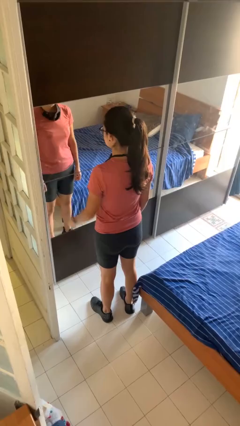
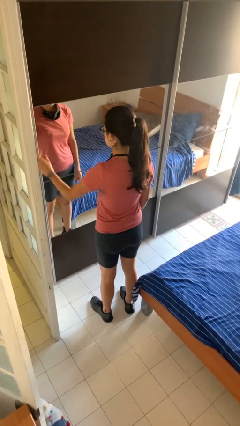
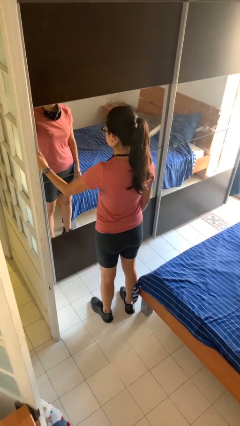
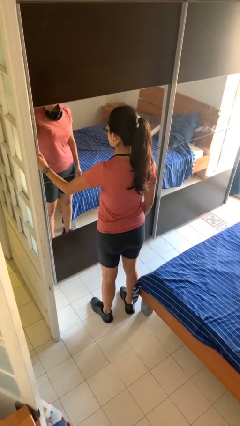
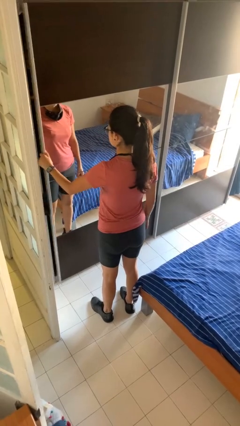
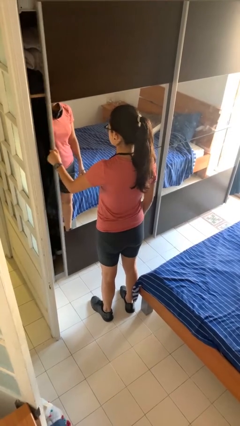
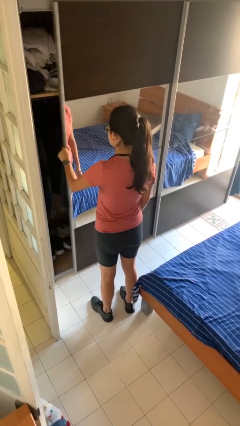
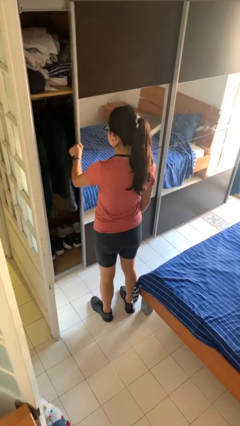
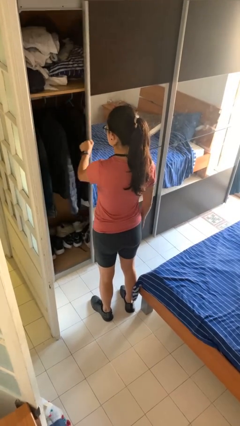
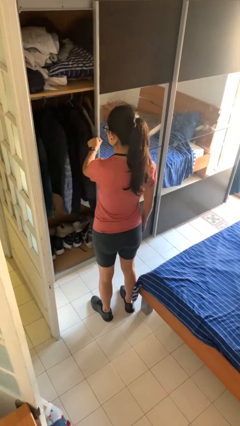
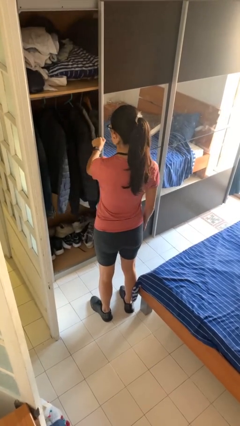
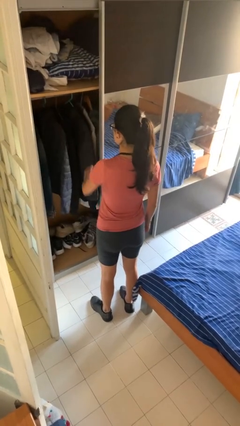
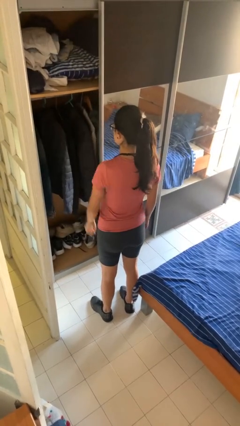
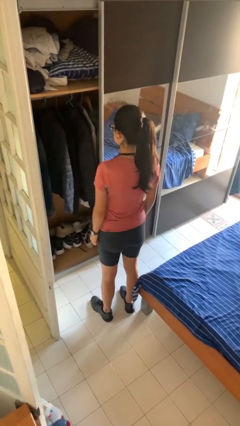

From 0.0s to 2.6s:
person opens dresser drawer
